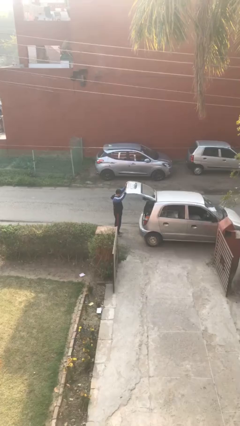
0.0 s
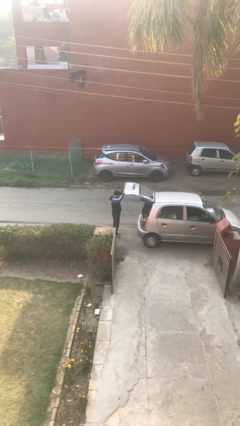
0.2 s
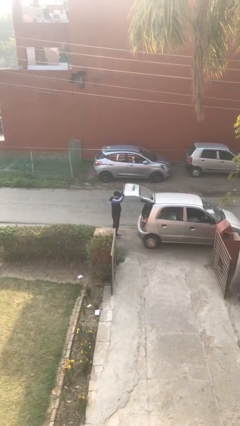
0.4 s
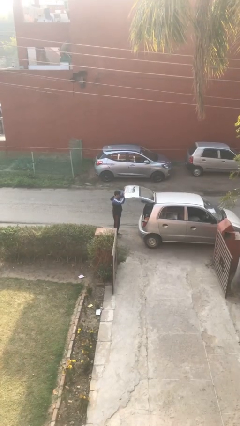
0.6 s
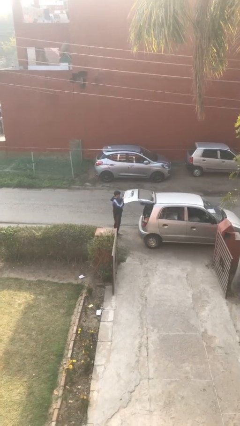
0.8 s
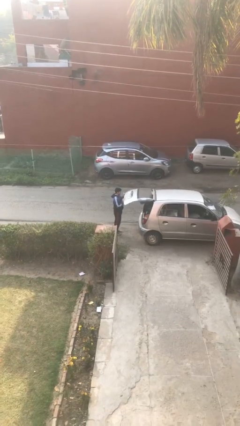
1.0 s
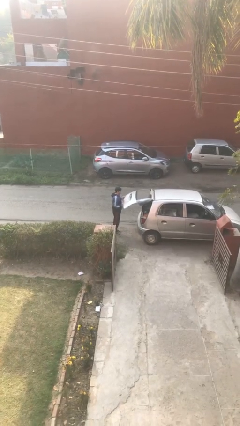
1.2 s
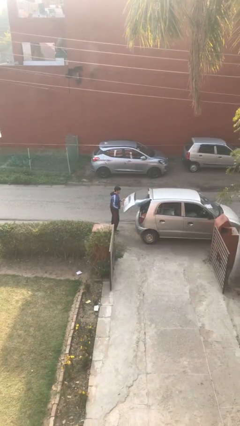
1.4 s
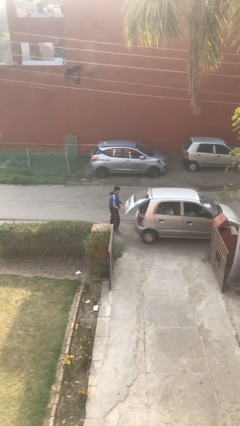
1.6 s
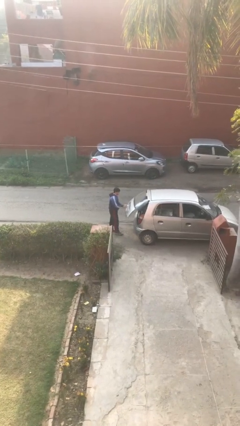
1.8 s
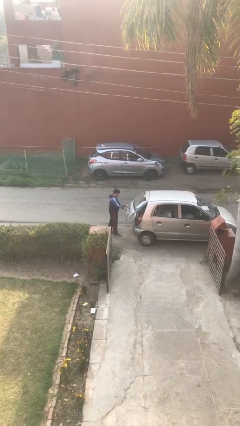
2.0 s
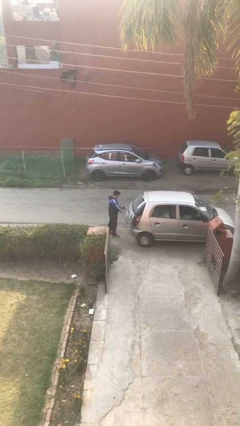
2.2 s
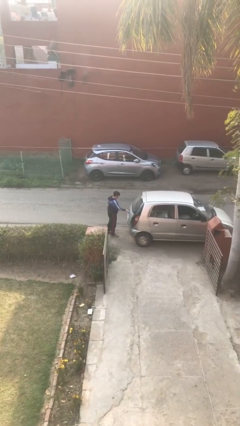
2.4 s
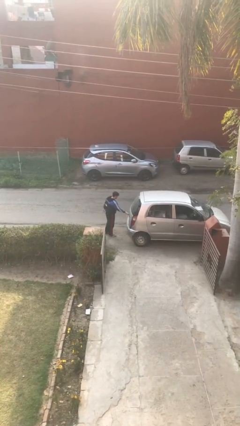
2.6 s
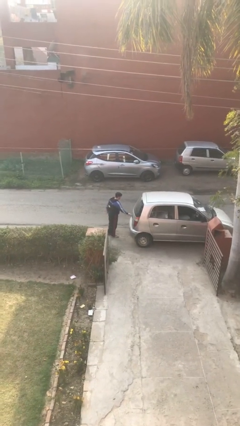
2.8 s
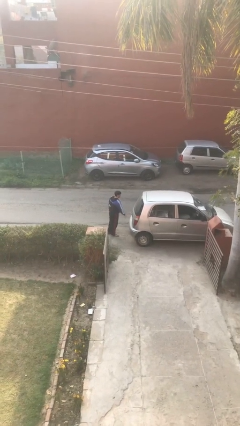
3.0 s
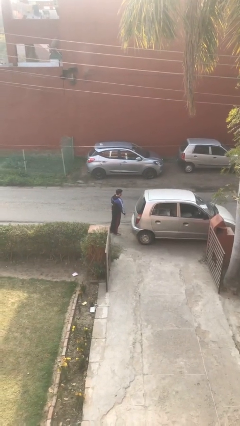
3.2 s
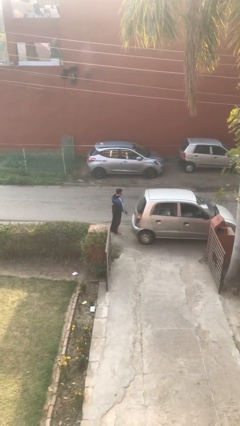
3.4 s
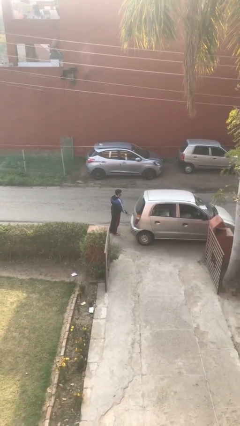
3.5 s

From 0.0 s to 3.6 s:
person closes car trunk

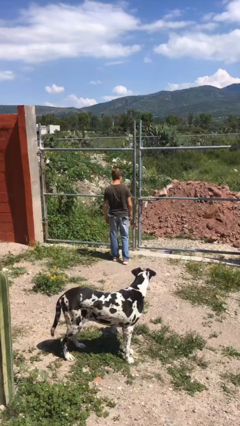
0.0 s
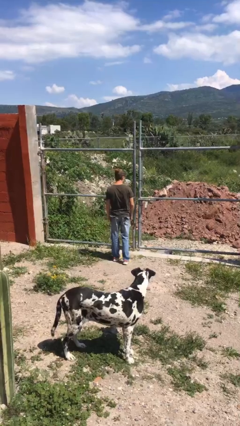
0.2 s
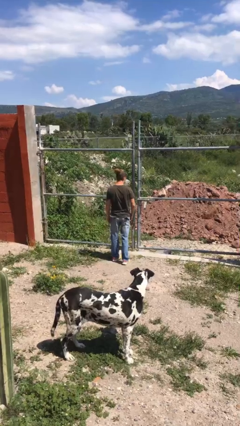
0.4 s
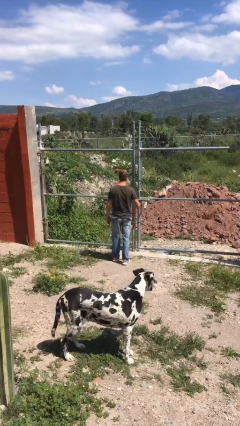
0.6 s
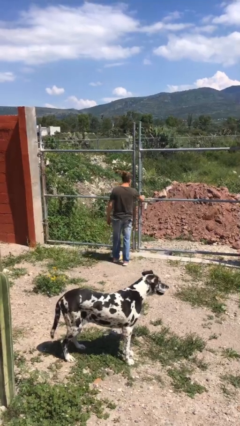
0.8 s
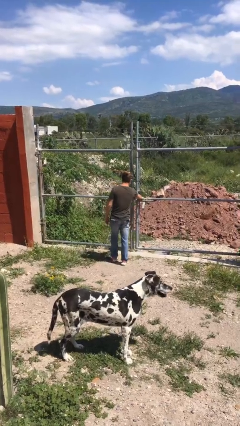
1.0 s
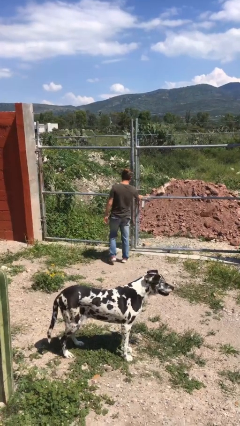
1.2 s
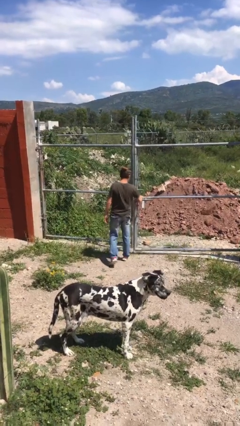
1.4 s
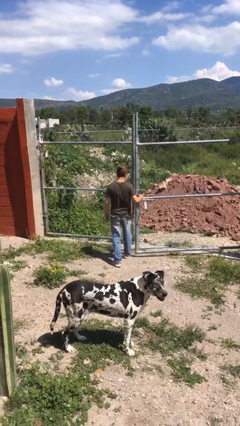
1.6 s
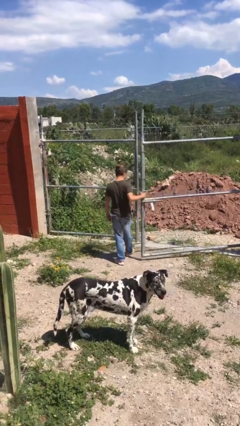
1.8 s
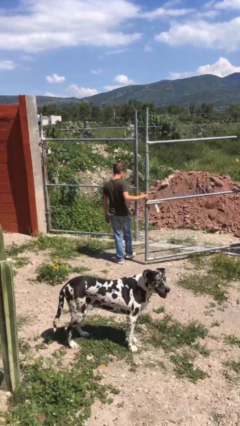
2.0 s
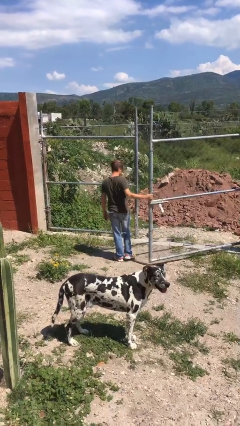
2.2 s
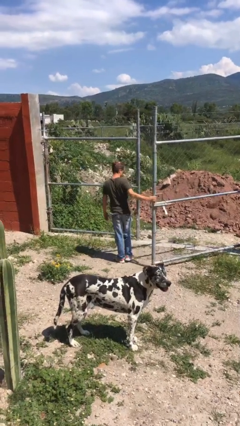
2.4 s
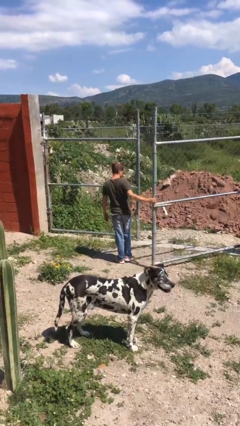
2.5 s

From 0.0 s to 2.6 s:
person opens gate

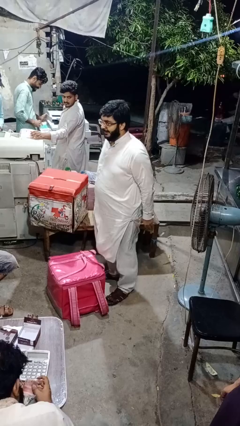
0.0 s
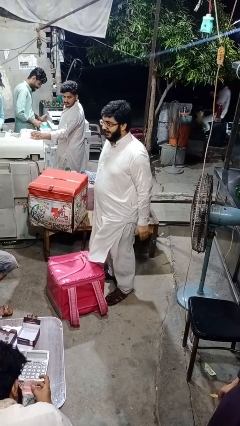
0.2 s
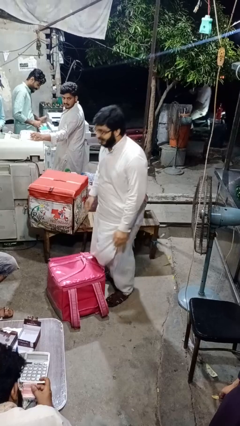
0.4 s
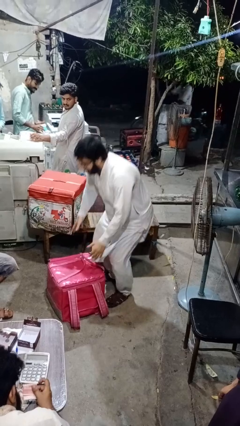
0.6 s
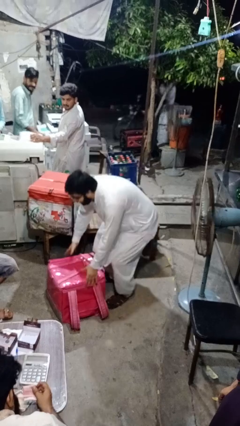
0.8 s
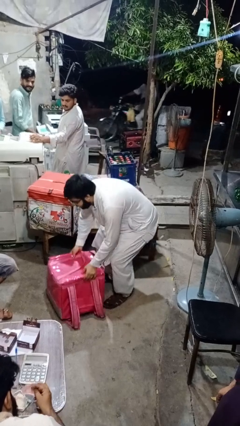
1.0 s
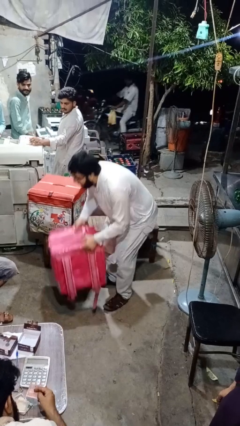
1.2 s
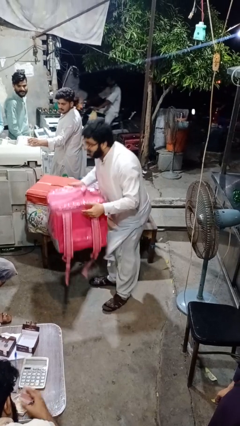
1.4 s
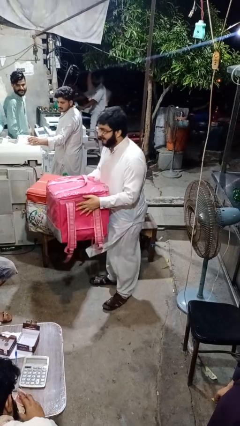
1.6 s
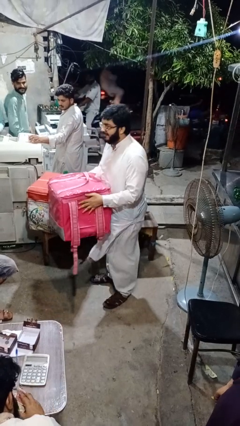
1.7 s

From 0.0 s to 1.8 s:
person picks up object from floor

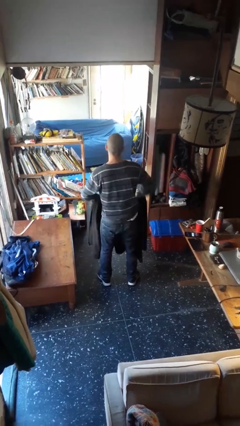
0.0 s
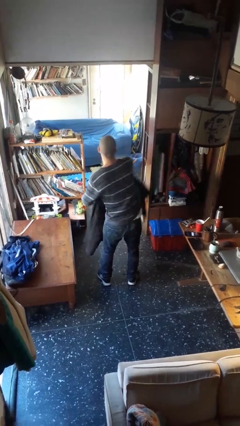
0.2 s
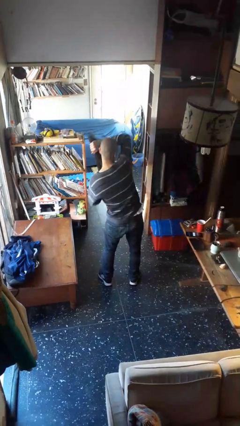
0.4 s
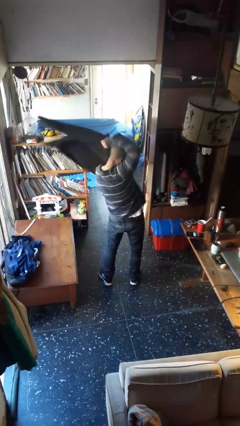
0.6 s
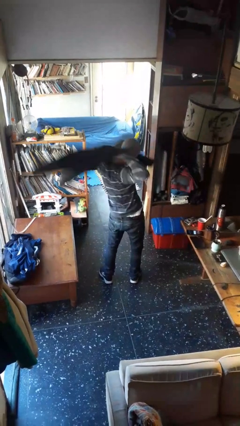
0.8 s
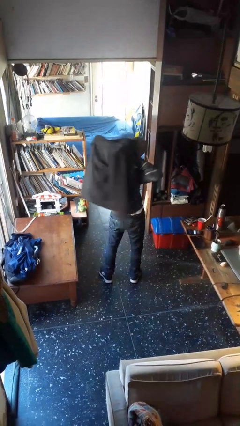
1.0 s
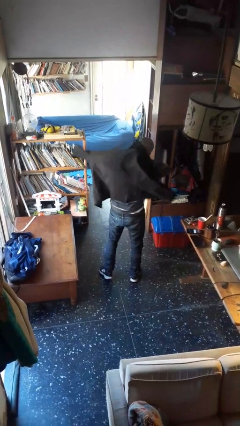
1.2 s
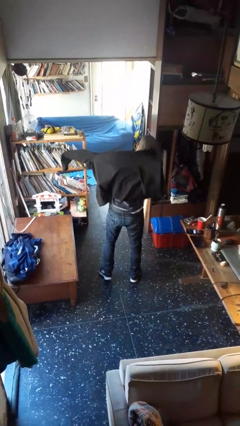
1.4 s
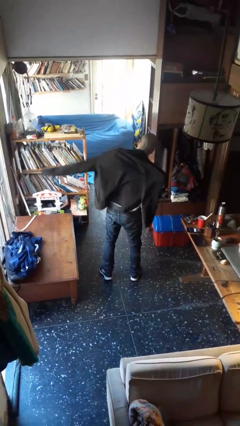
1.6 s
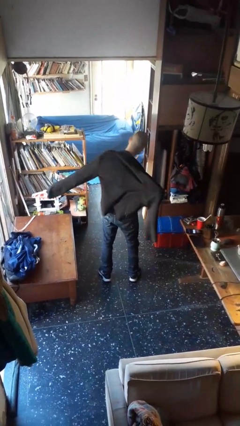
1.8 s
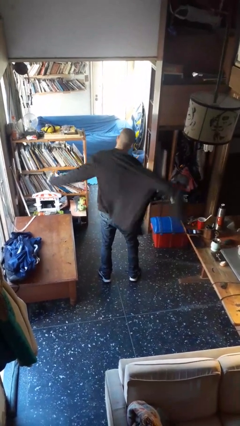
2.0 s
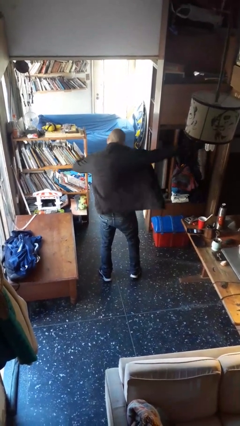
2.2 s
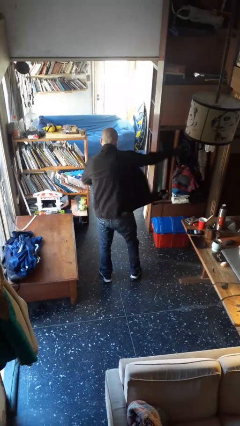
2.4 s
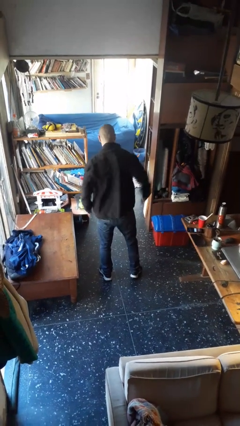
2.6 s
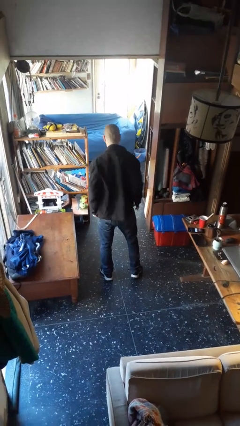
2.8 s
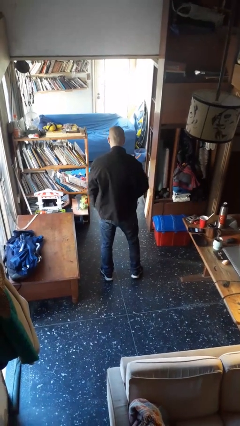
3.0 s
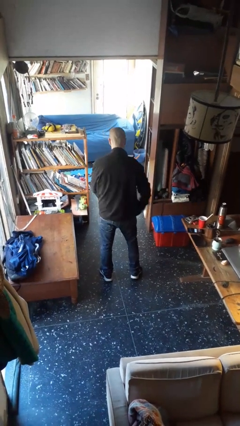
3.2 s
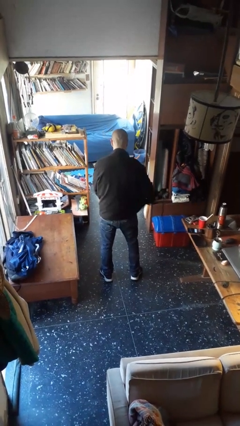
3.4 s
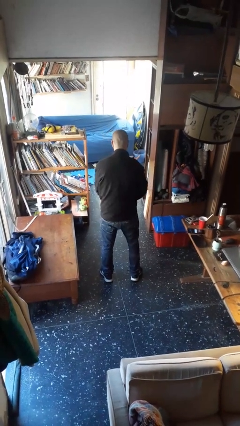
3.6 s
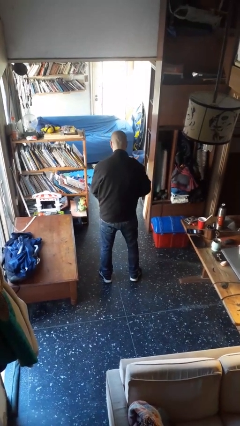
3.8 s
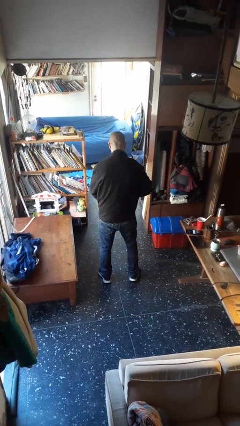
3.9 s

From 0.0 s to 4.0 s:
person puts on jacket

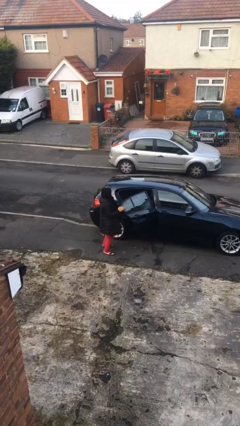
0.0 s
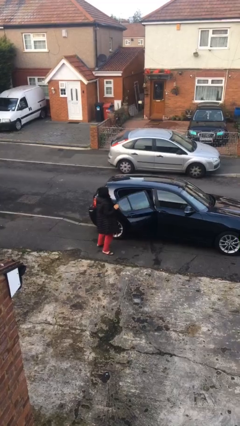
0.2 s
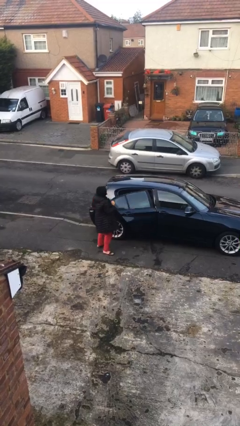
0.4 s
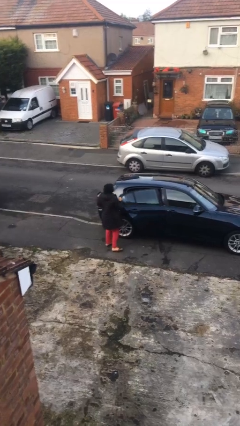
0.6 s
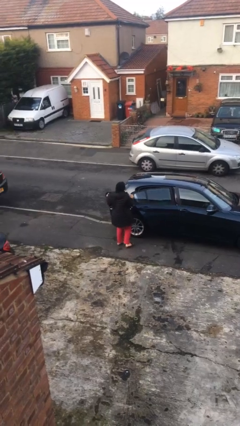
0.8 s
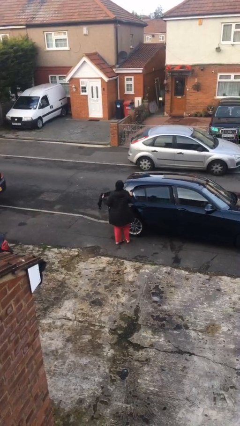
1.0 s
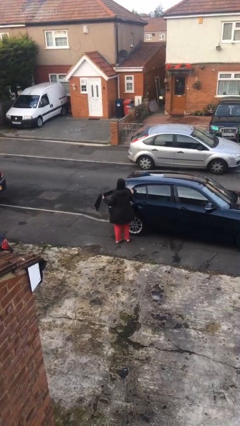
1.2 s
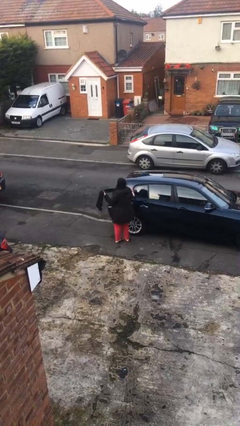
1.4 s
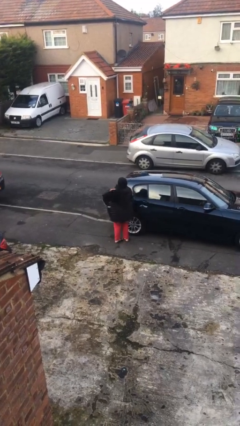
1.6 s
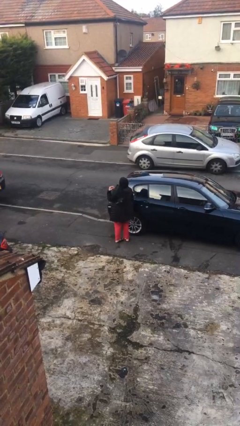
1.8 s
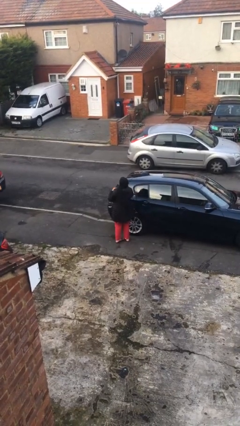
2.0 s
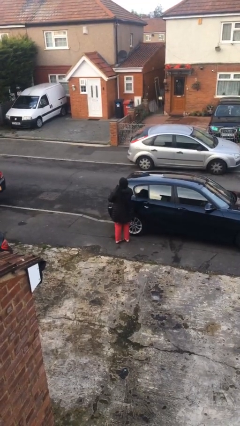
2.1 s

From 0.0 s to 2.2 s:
person closes car door

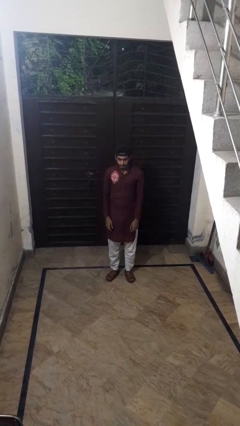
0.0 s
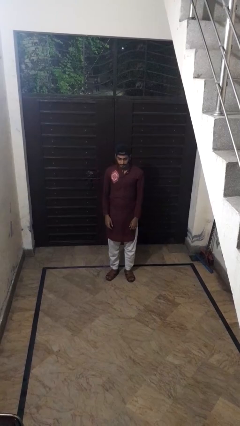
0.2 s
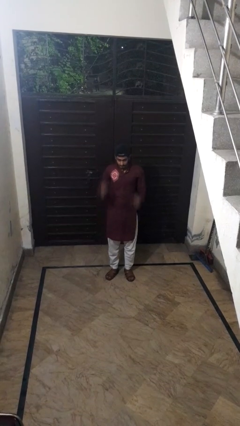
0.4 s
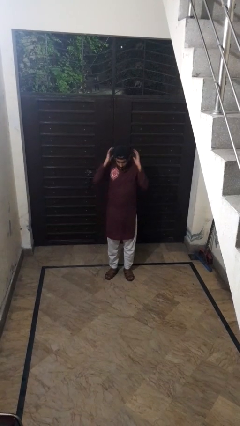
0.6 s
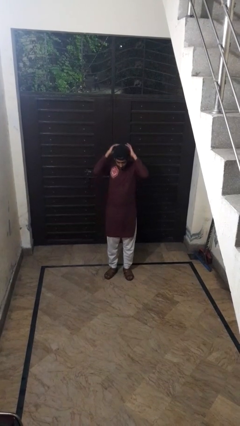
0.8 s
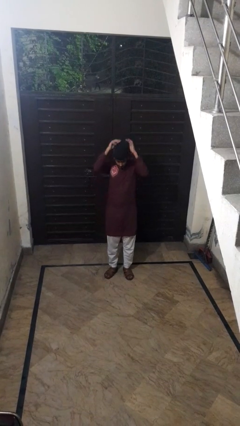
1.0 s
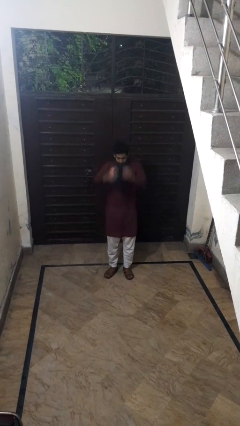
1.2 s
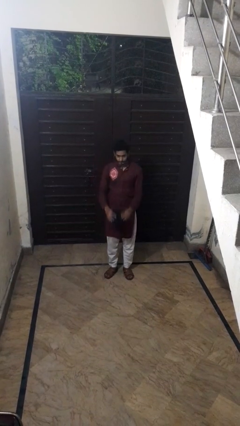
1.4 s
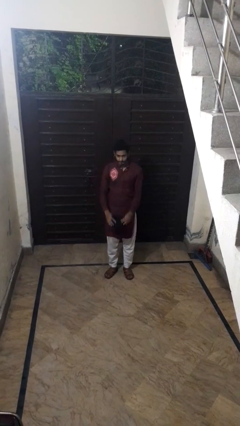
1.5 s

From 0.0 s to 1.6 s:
person takes off hat

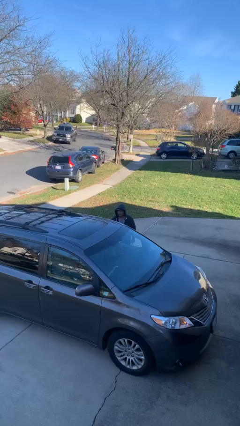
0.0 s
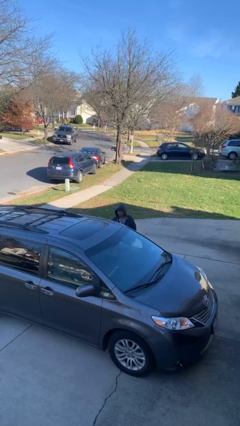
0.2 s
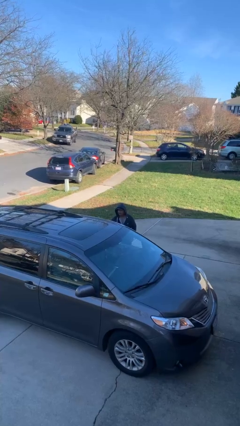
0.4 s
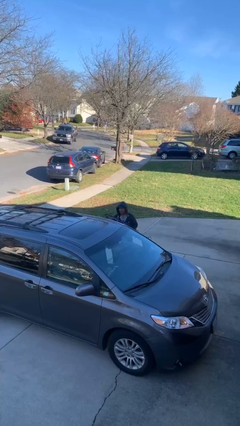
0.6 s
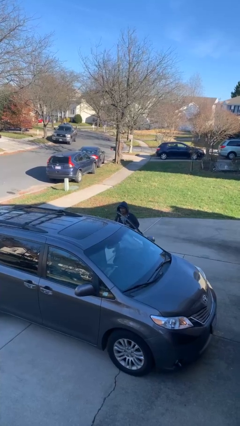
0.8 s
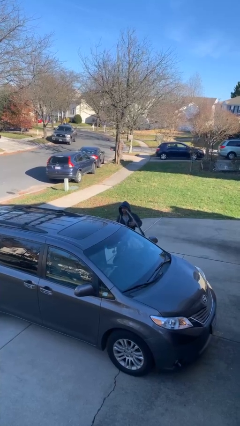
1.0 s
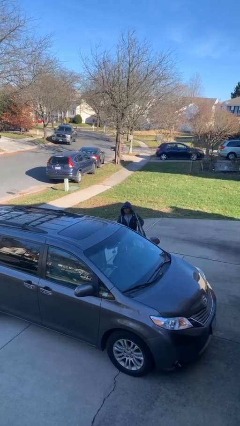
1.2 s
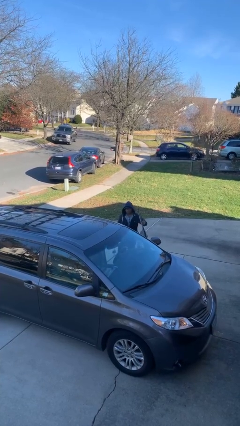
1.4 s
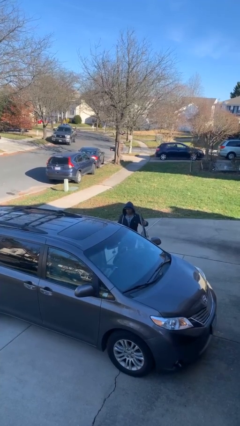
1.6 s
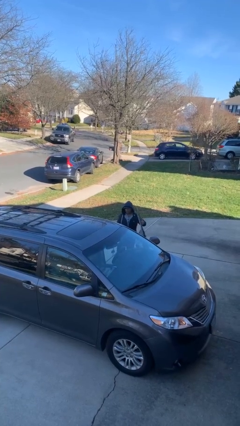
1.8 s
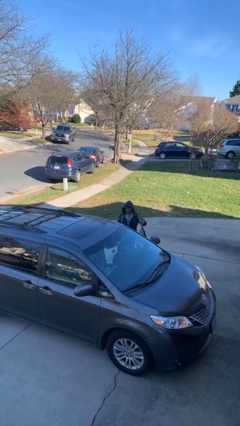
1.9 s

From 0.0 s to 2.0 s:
person opens car door
